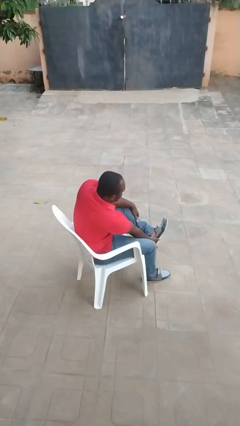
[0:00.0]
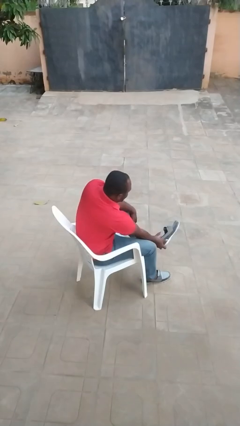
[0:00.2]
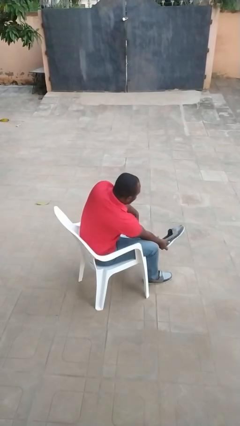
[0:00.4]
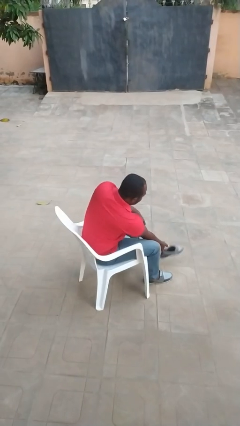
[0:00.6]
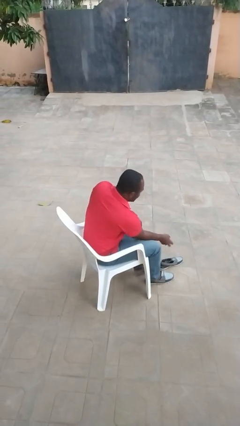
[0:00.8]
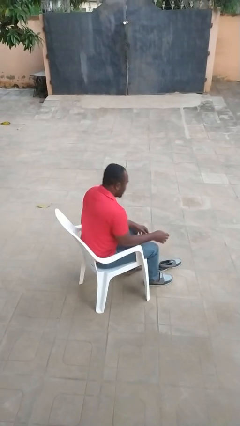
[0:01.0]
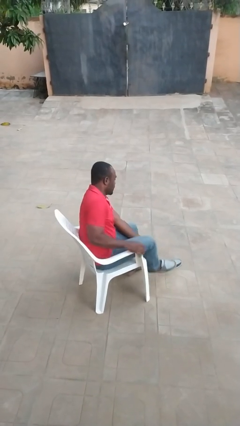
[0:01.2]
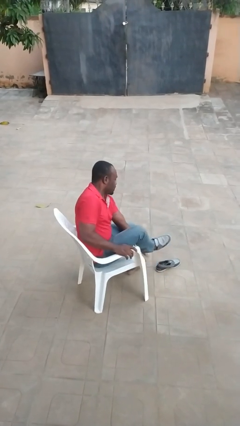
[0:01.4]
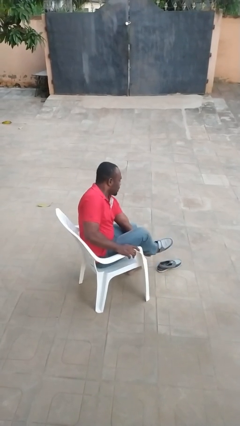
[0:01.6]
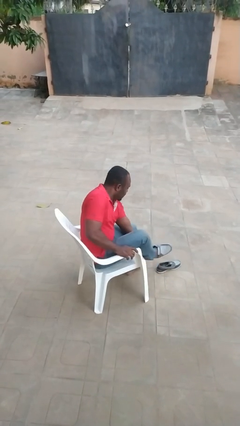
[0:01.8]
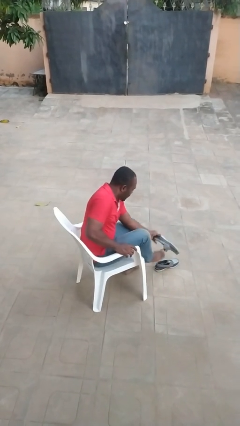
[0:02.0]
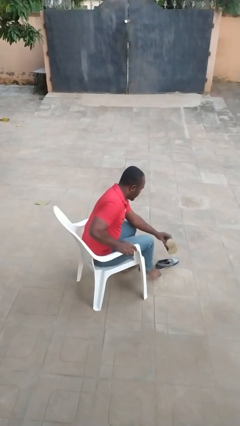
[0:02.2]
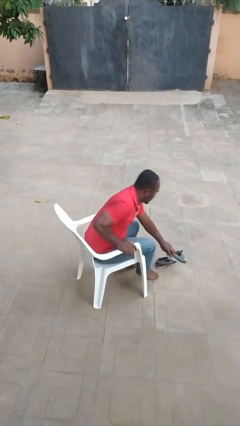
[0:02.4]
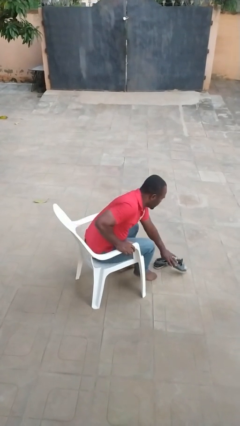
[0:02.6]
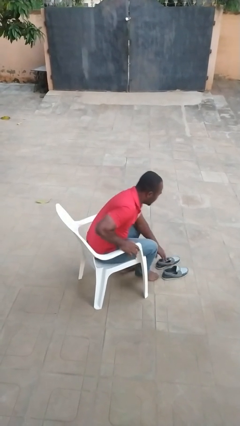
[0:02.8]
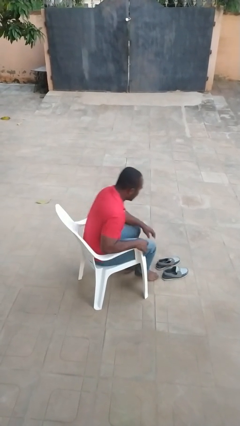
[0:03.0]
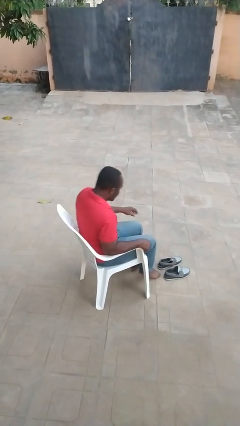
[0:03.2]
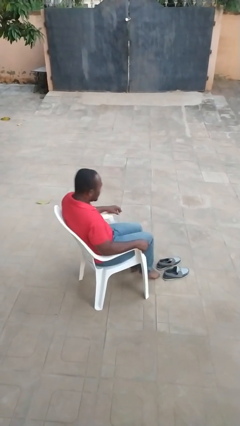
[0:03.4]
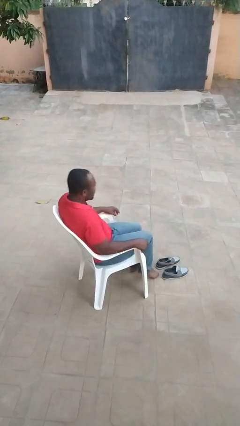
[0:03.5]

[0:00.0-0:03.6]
person takes off shoes

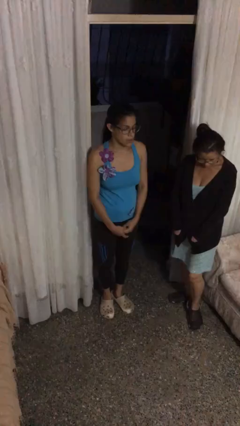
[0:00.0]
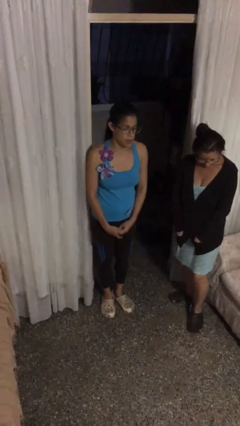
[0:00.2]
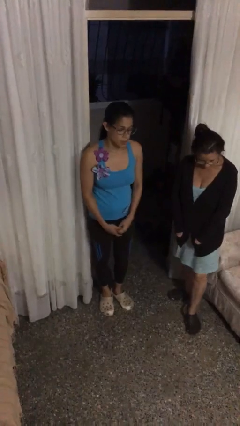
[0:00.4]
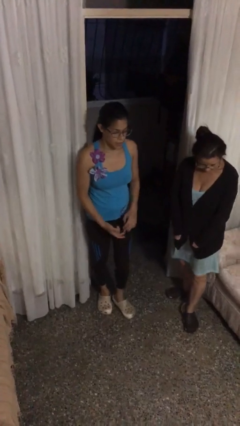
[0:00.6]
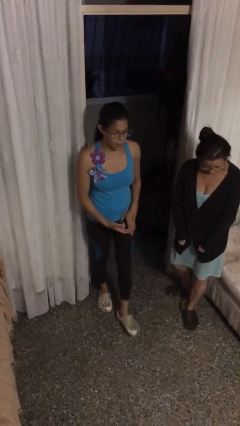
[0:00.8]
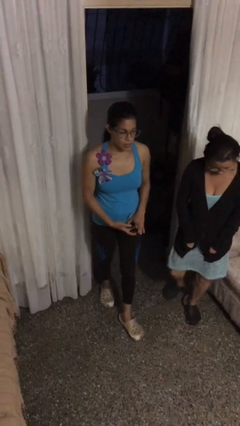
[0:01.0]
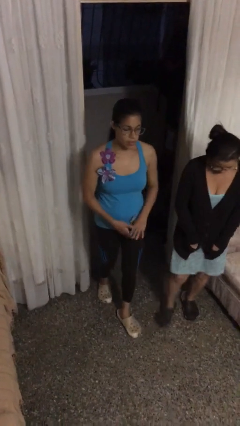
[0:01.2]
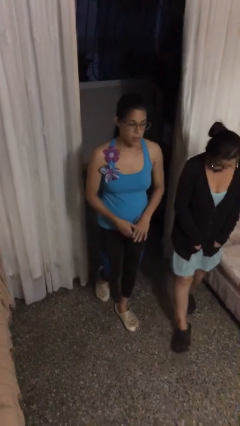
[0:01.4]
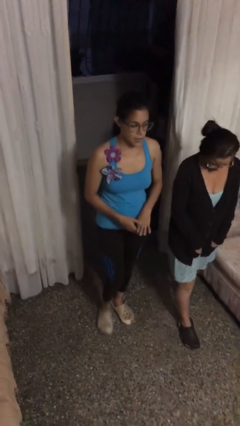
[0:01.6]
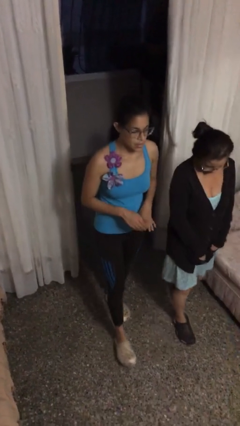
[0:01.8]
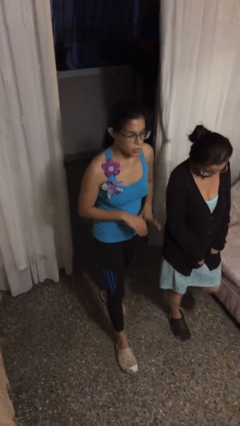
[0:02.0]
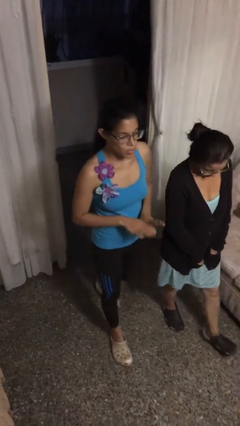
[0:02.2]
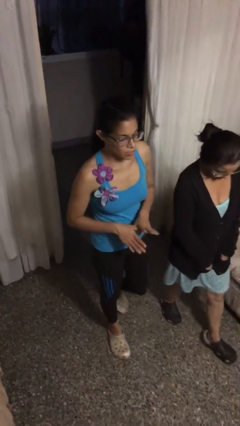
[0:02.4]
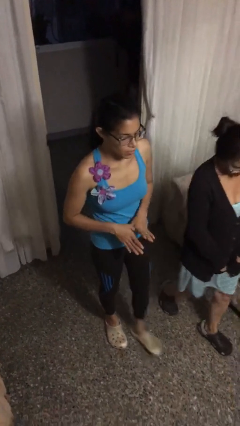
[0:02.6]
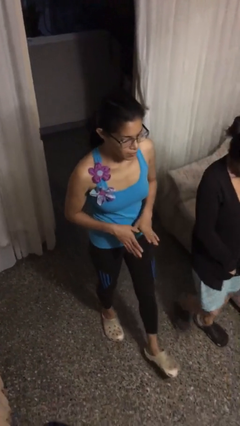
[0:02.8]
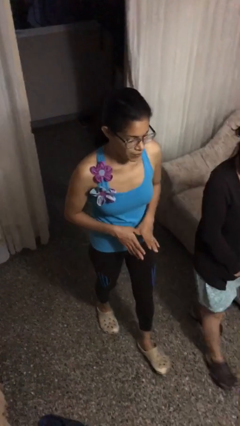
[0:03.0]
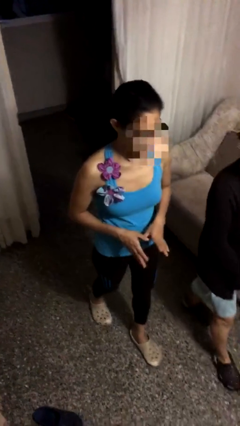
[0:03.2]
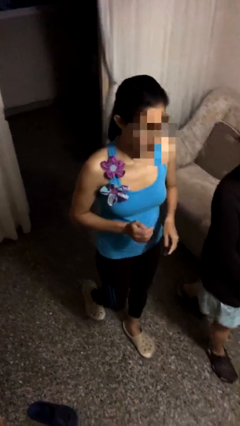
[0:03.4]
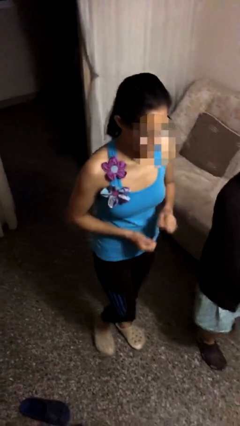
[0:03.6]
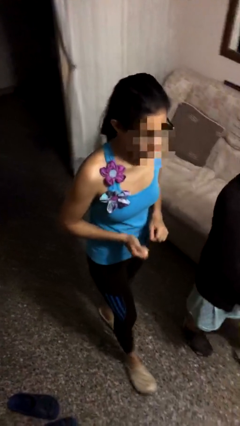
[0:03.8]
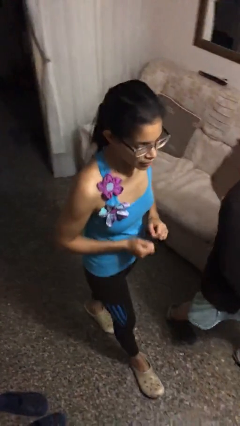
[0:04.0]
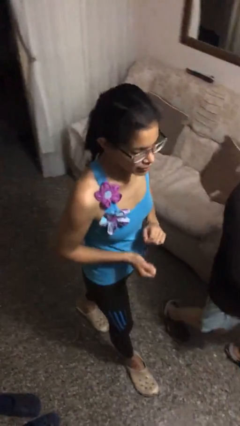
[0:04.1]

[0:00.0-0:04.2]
person talks to person

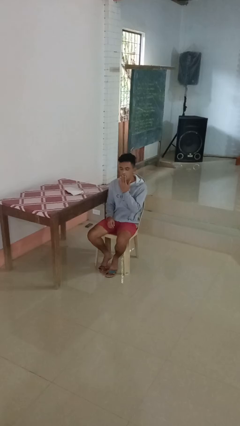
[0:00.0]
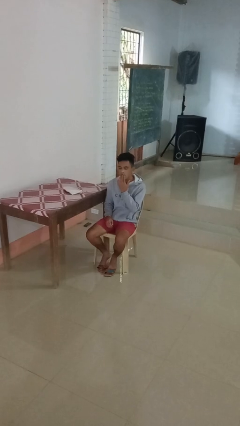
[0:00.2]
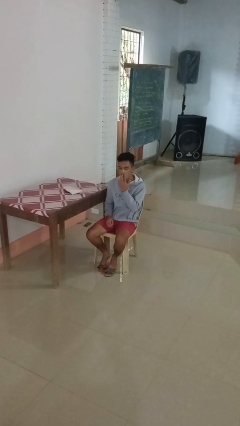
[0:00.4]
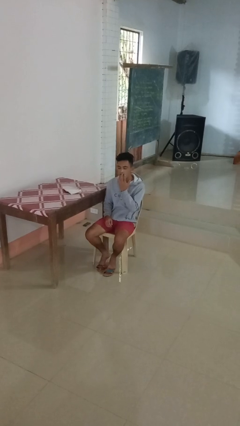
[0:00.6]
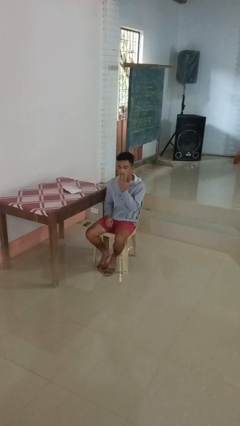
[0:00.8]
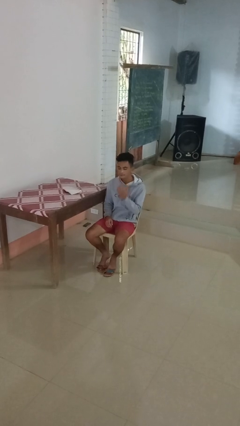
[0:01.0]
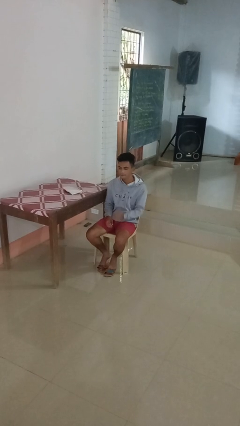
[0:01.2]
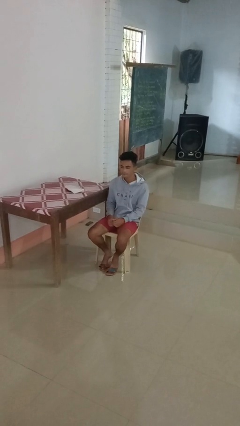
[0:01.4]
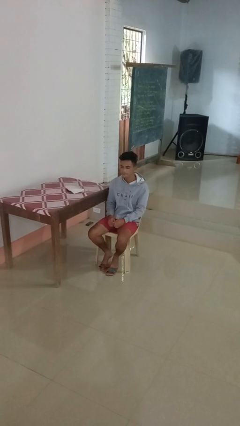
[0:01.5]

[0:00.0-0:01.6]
person licks fingers

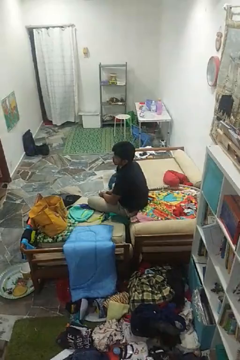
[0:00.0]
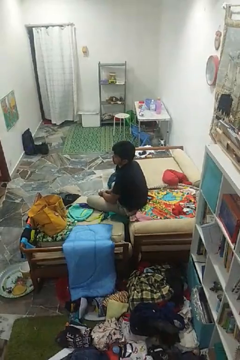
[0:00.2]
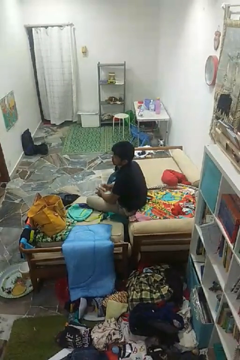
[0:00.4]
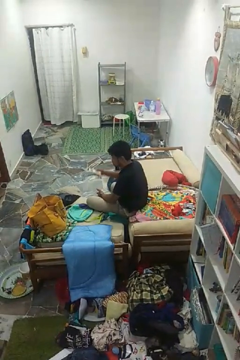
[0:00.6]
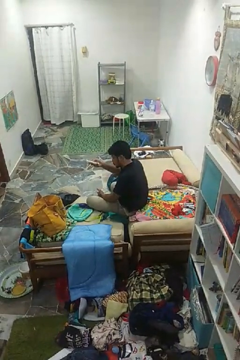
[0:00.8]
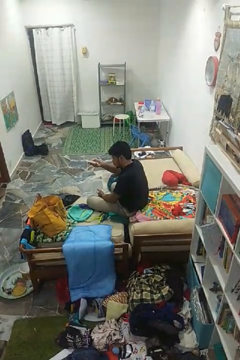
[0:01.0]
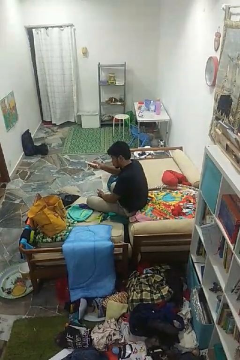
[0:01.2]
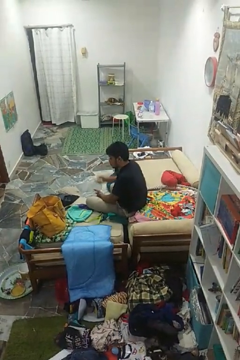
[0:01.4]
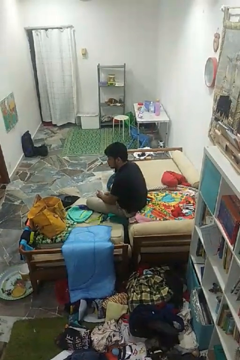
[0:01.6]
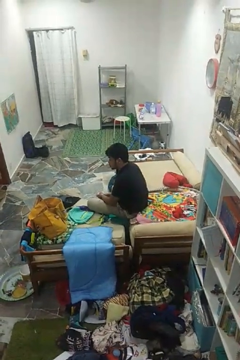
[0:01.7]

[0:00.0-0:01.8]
person uses television remote

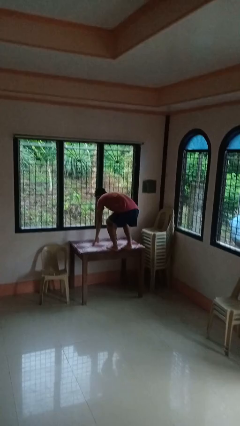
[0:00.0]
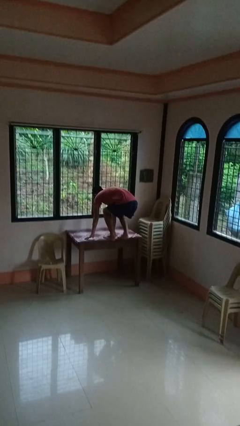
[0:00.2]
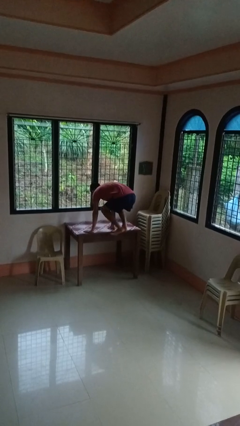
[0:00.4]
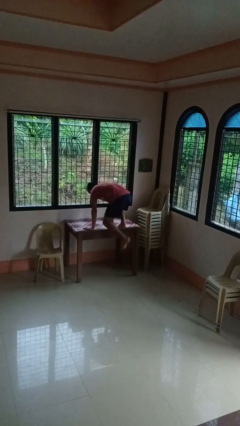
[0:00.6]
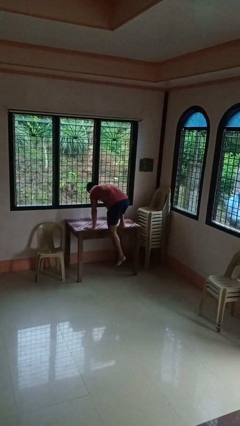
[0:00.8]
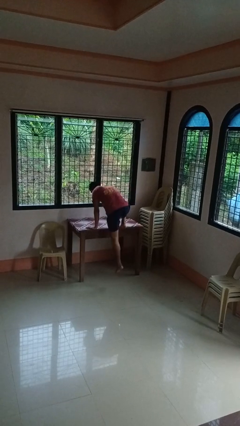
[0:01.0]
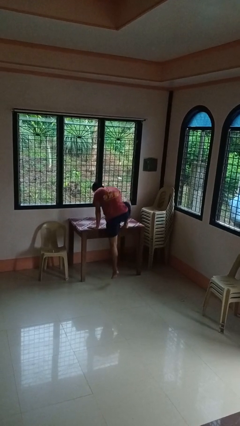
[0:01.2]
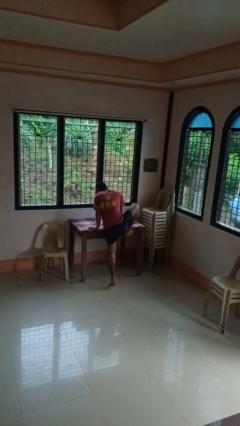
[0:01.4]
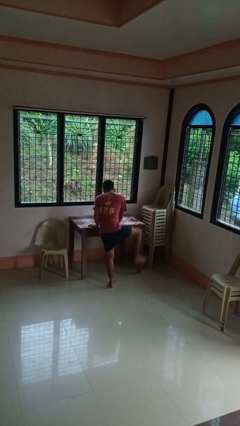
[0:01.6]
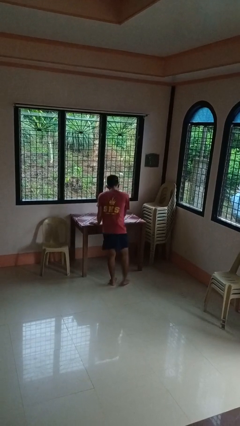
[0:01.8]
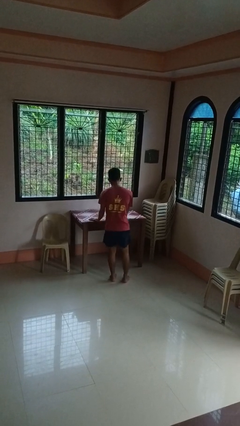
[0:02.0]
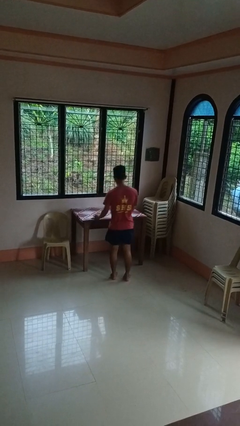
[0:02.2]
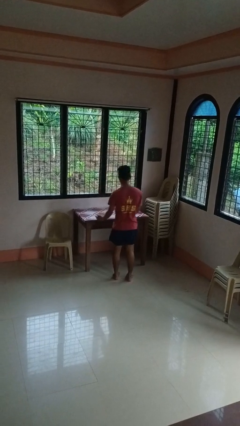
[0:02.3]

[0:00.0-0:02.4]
person climbs off table

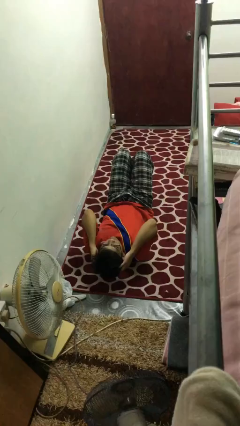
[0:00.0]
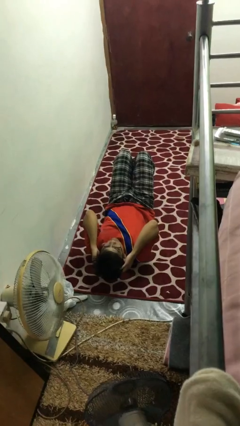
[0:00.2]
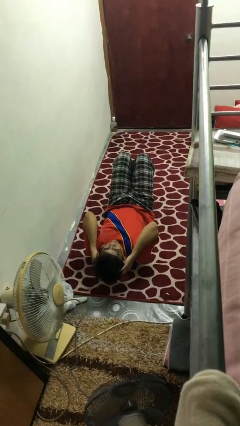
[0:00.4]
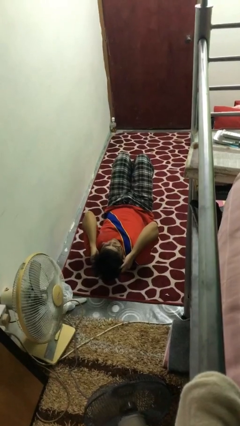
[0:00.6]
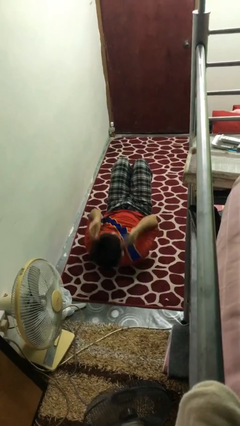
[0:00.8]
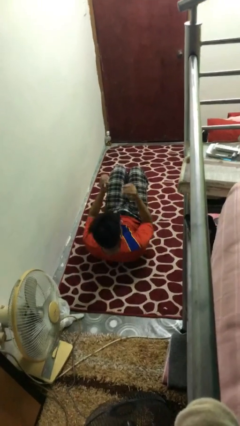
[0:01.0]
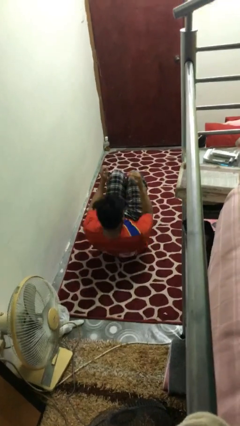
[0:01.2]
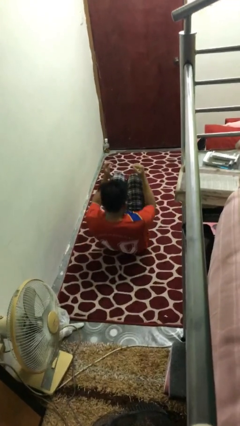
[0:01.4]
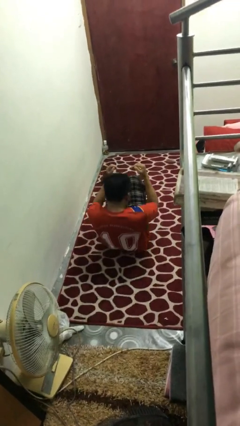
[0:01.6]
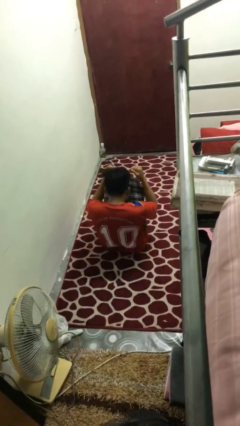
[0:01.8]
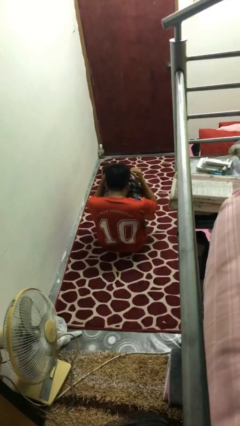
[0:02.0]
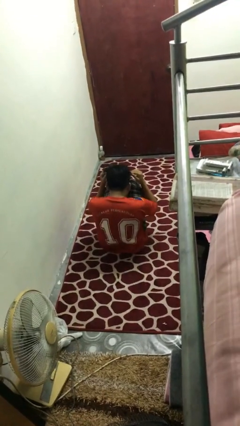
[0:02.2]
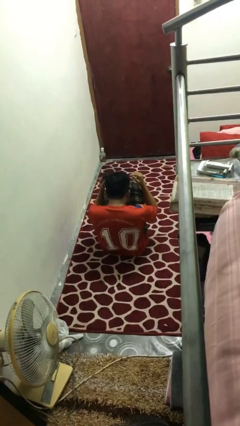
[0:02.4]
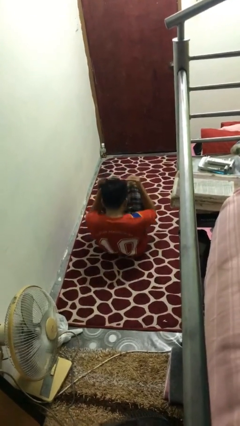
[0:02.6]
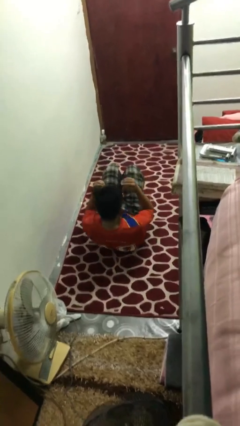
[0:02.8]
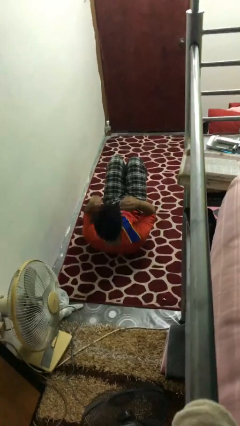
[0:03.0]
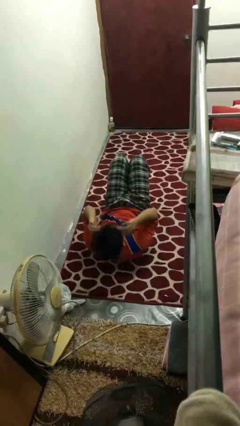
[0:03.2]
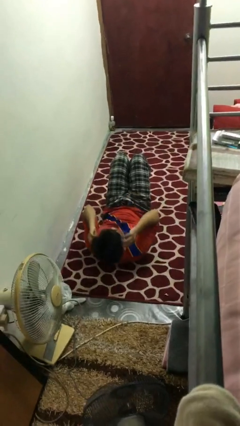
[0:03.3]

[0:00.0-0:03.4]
person exercises with situp

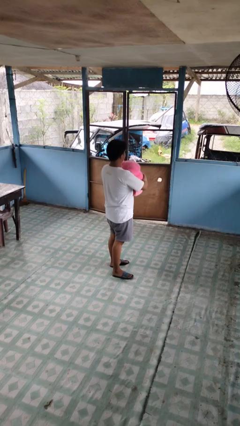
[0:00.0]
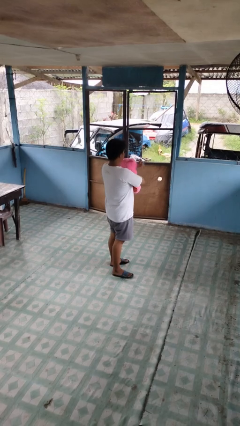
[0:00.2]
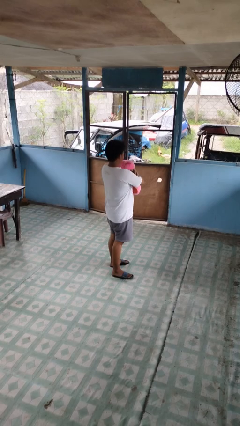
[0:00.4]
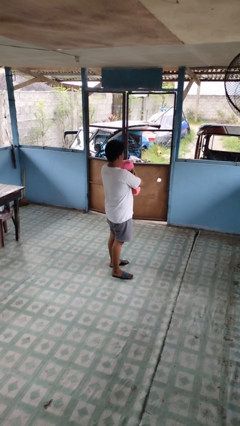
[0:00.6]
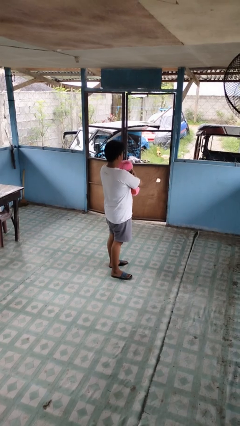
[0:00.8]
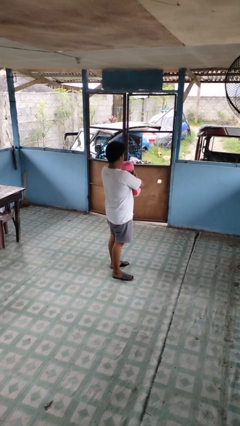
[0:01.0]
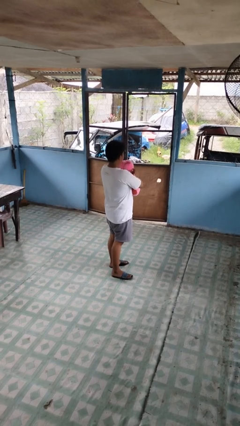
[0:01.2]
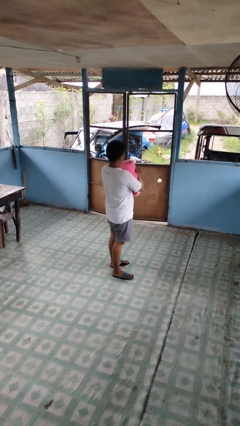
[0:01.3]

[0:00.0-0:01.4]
person hugs stuffed animal
